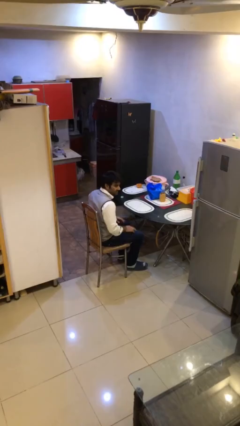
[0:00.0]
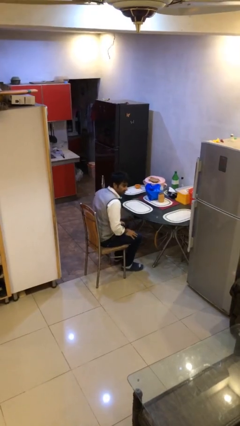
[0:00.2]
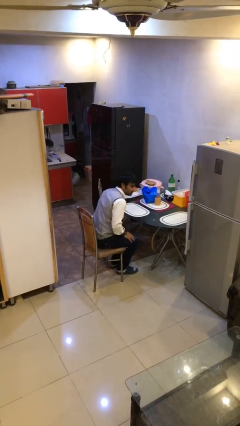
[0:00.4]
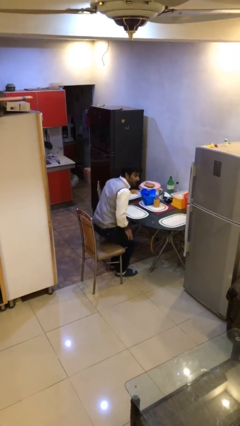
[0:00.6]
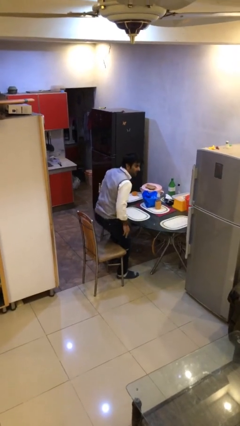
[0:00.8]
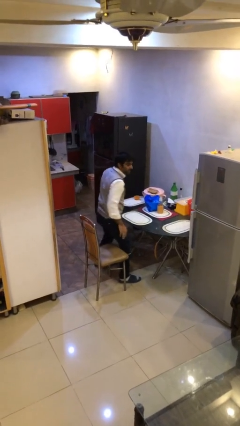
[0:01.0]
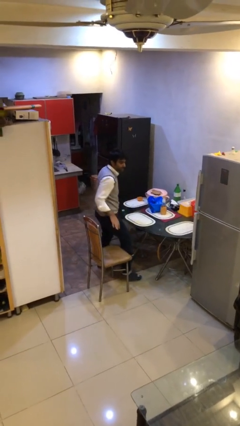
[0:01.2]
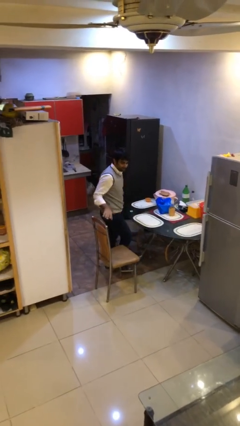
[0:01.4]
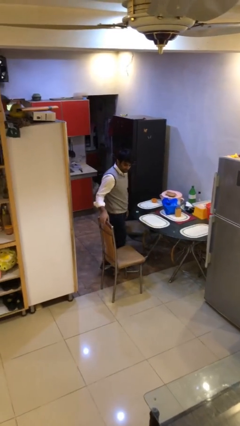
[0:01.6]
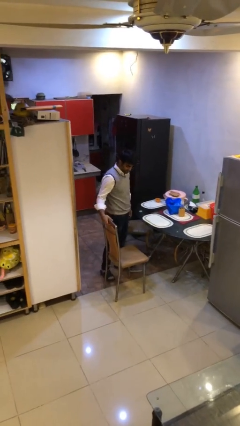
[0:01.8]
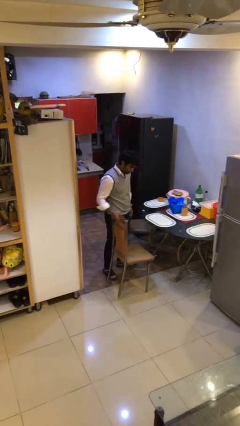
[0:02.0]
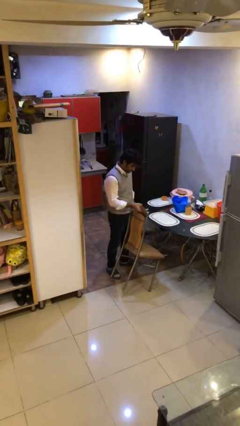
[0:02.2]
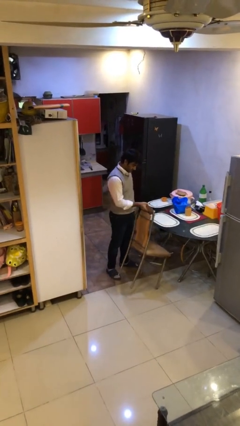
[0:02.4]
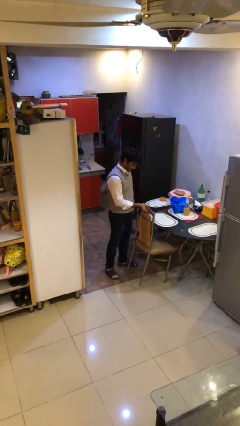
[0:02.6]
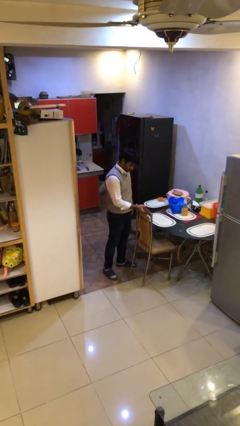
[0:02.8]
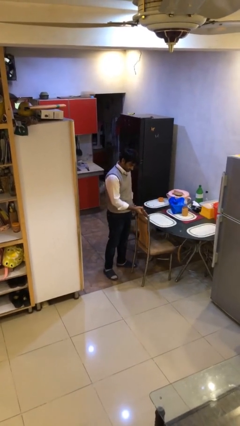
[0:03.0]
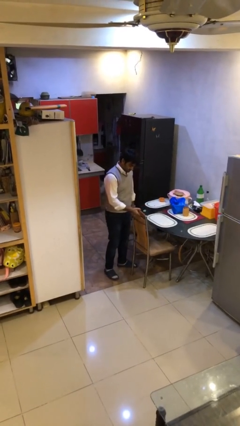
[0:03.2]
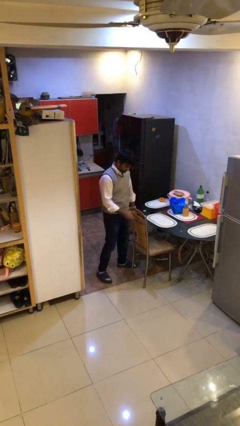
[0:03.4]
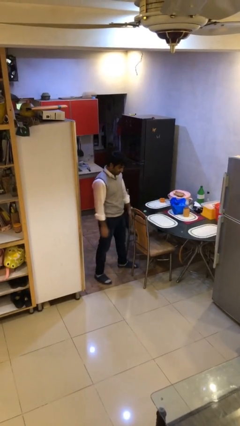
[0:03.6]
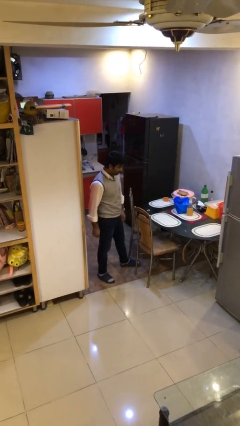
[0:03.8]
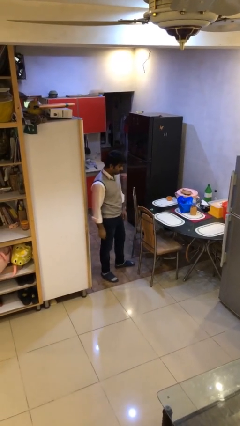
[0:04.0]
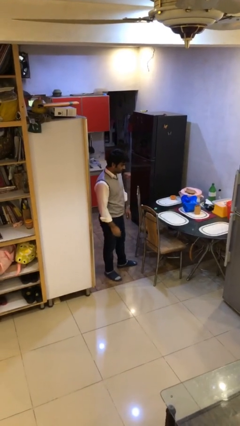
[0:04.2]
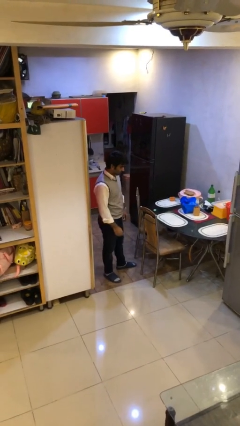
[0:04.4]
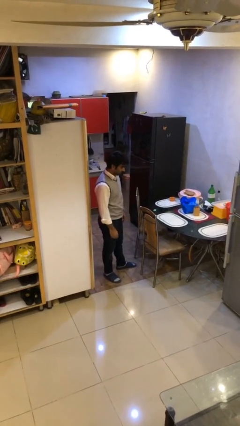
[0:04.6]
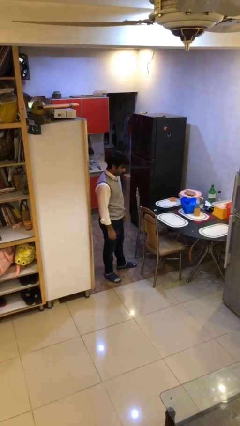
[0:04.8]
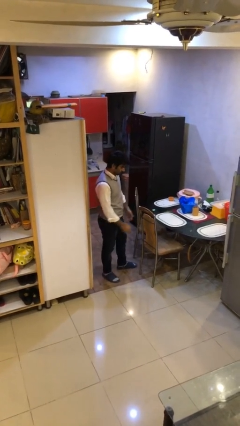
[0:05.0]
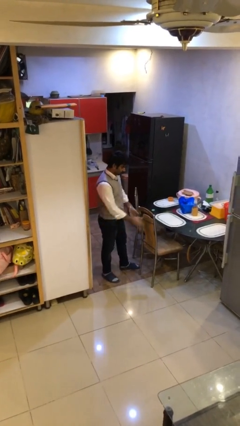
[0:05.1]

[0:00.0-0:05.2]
person stands up

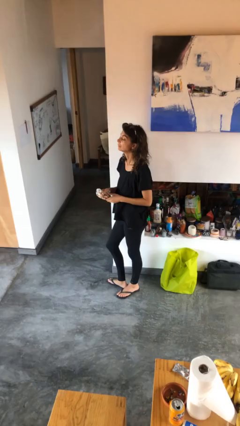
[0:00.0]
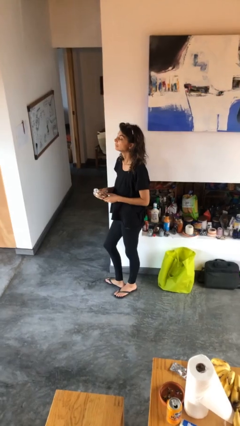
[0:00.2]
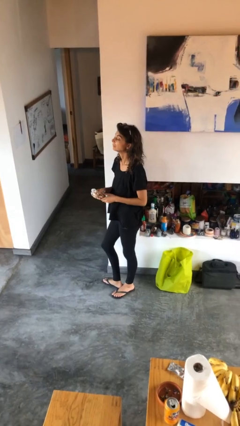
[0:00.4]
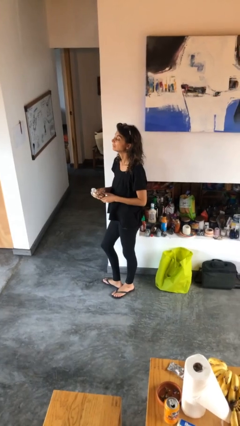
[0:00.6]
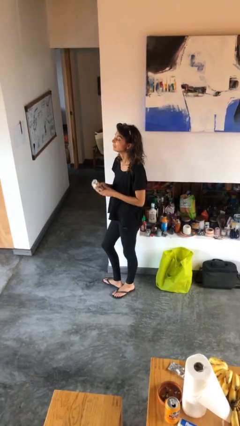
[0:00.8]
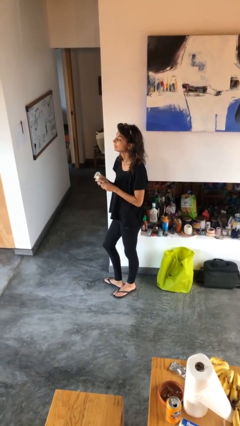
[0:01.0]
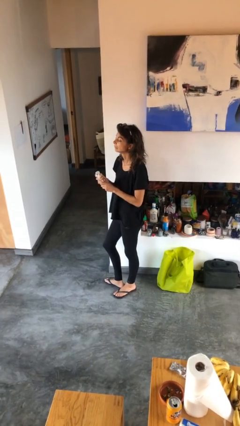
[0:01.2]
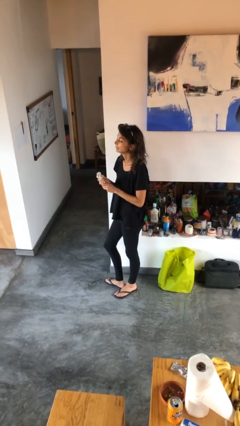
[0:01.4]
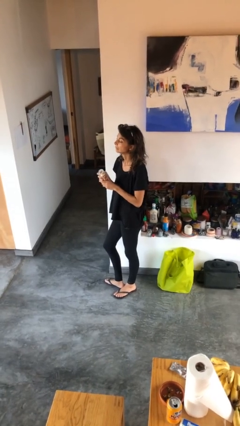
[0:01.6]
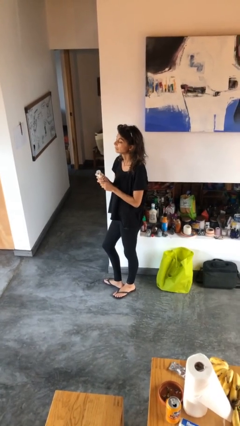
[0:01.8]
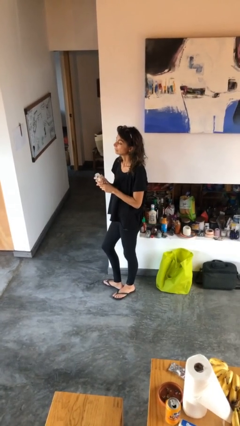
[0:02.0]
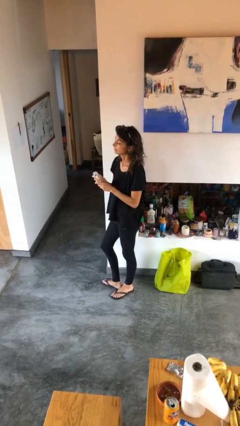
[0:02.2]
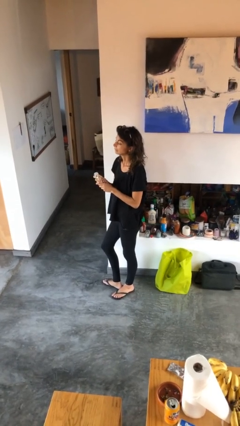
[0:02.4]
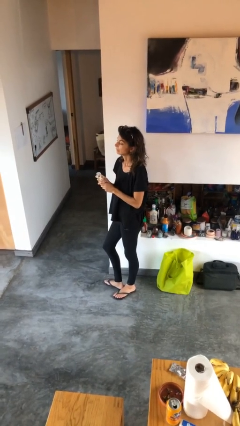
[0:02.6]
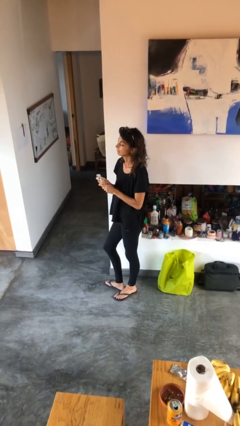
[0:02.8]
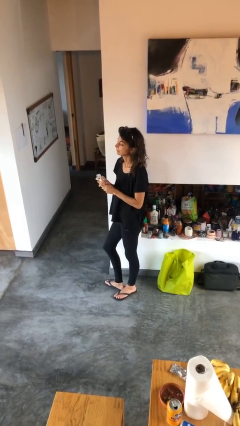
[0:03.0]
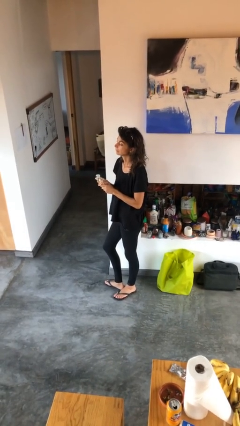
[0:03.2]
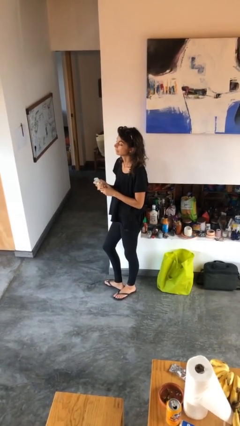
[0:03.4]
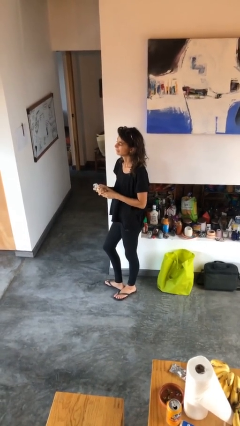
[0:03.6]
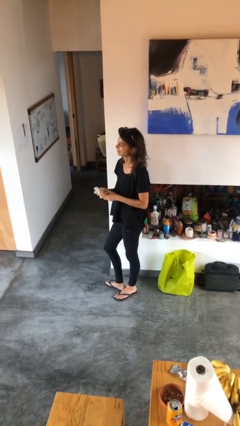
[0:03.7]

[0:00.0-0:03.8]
person squeezes object

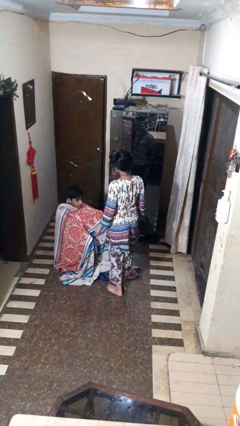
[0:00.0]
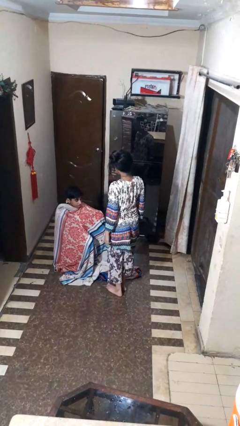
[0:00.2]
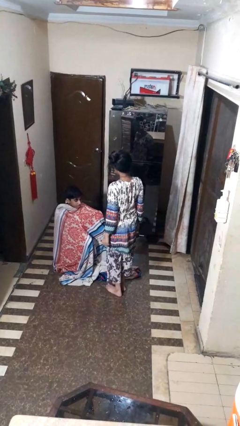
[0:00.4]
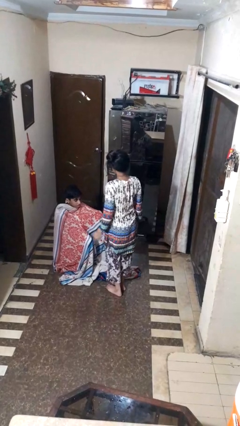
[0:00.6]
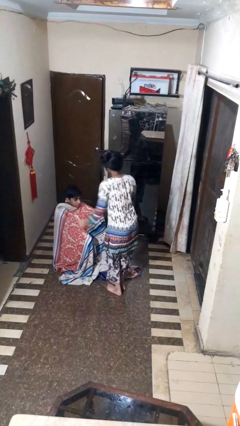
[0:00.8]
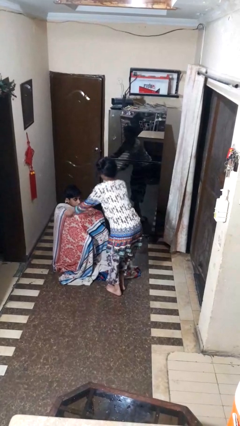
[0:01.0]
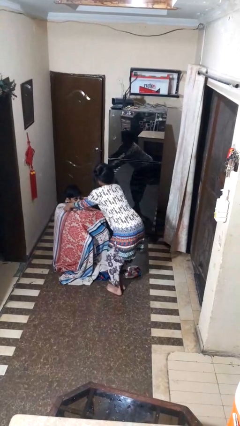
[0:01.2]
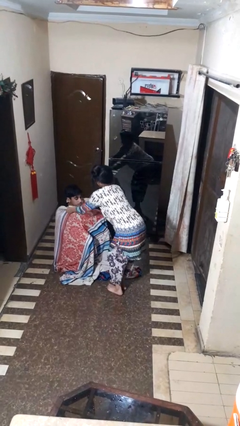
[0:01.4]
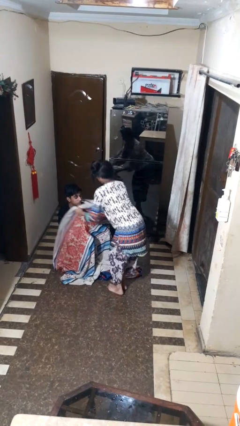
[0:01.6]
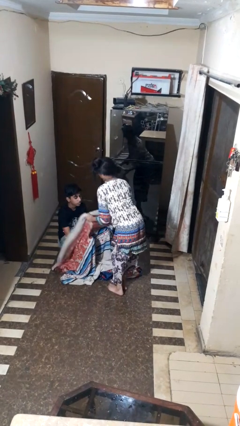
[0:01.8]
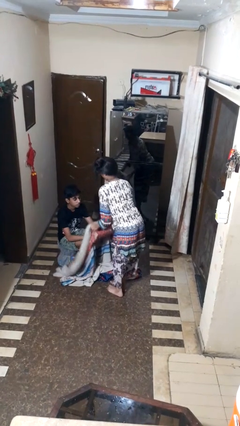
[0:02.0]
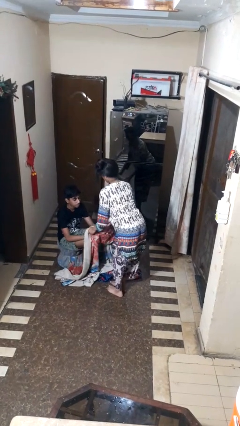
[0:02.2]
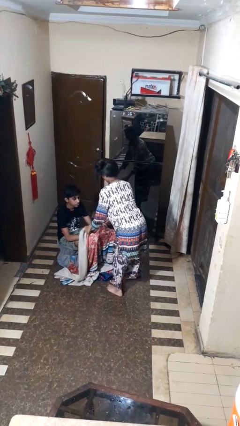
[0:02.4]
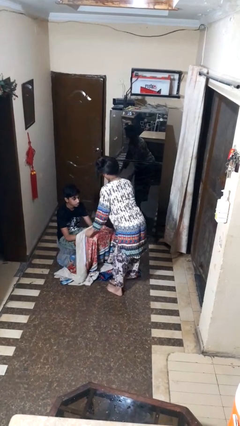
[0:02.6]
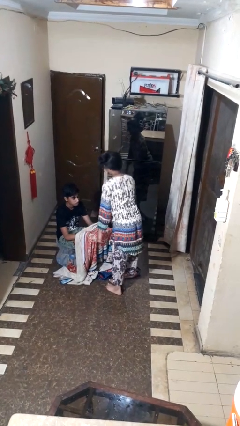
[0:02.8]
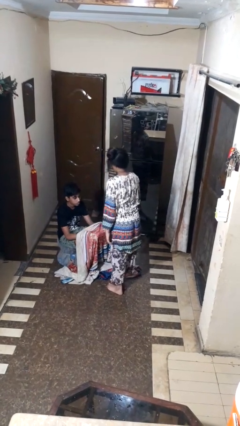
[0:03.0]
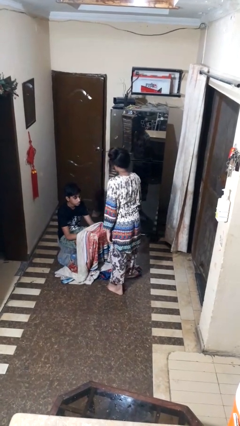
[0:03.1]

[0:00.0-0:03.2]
person uncovers friend with blanket

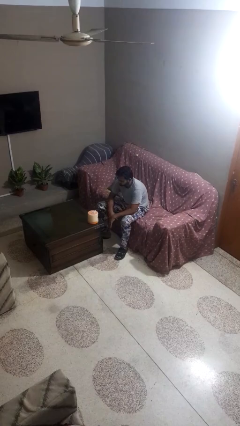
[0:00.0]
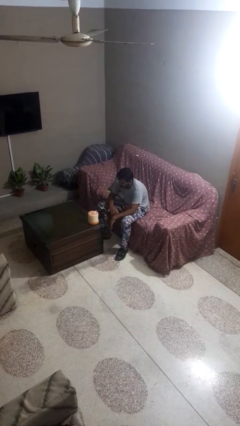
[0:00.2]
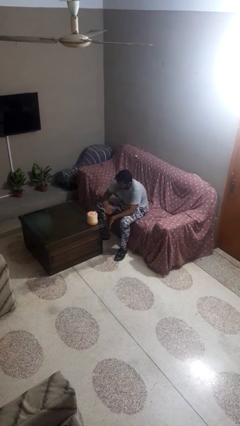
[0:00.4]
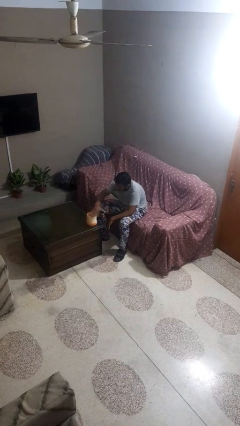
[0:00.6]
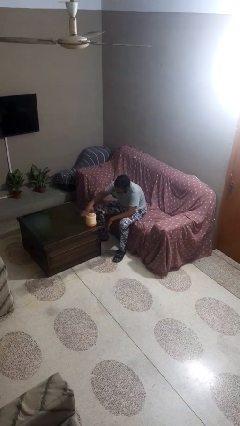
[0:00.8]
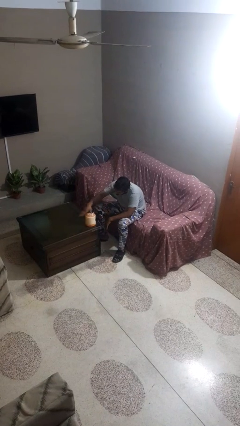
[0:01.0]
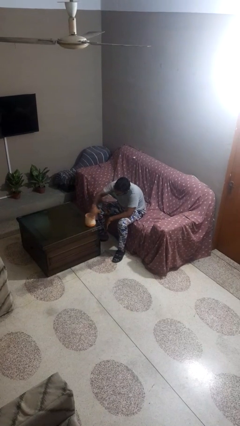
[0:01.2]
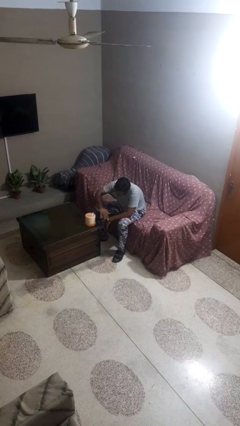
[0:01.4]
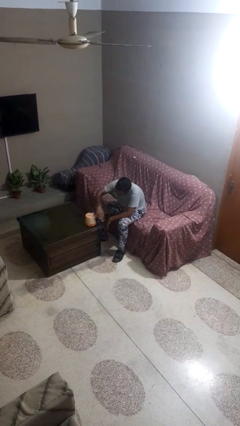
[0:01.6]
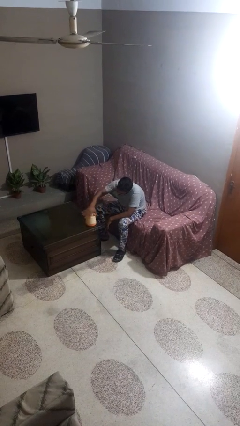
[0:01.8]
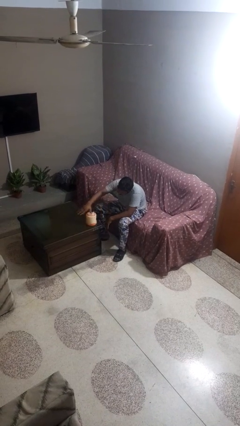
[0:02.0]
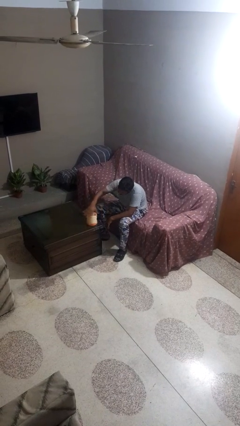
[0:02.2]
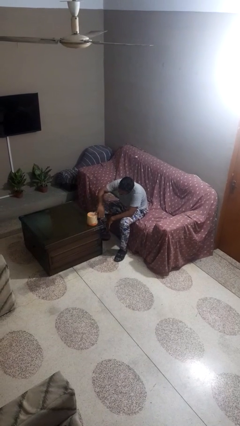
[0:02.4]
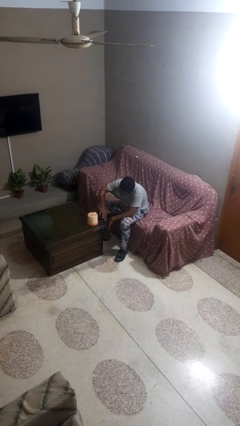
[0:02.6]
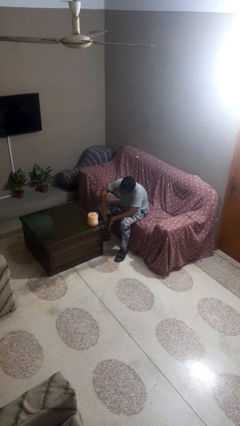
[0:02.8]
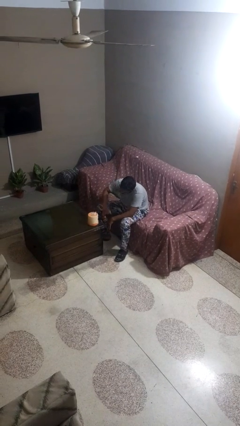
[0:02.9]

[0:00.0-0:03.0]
person waves hand over object

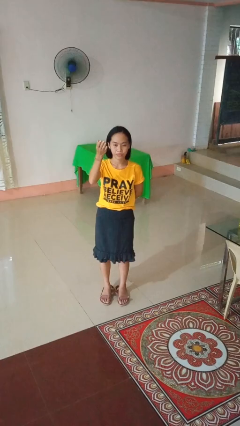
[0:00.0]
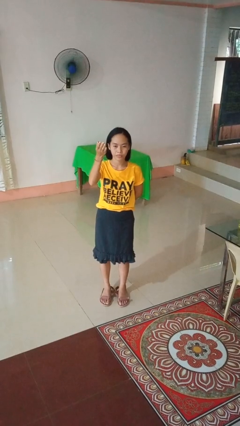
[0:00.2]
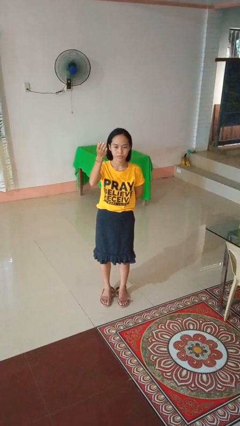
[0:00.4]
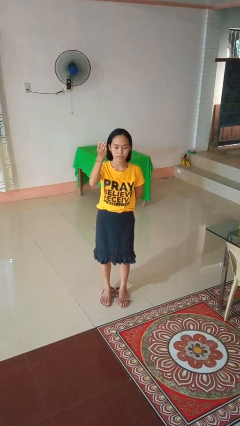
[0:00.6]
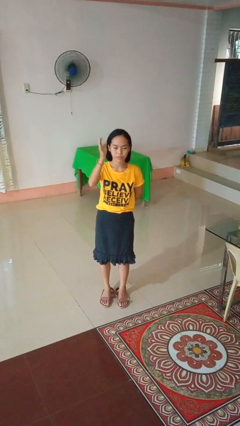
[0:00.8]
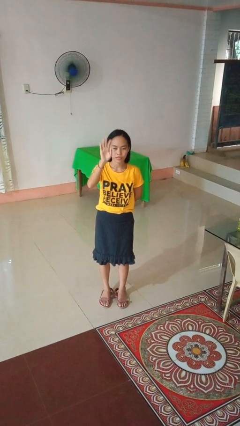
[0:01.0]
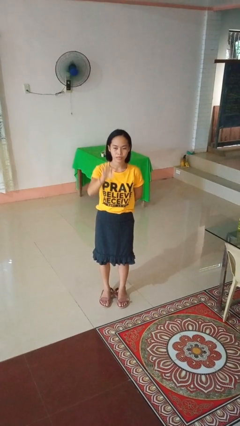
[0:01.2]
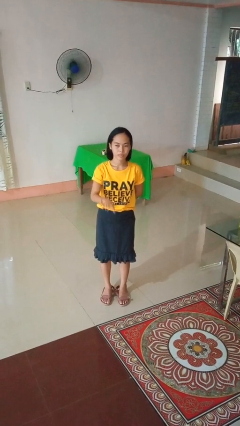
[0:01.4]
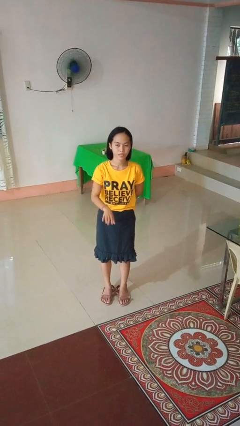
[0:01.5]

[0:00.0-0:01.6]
person gestures swipe up

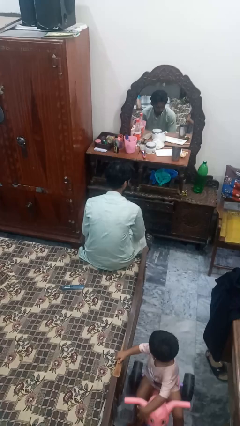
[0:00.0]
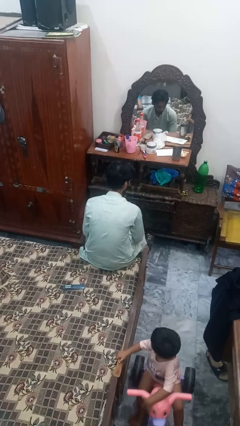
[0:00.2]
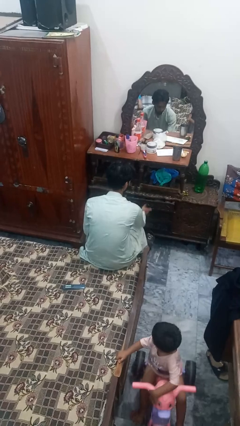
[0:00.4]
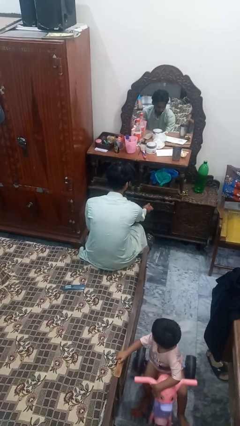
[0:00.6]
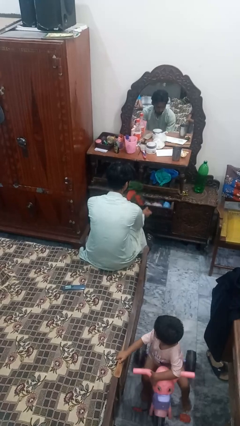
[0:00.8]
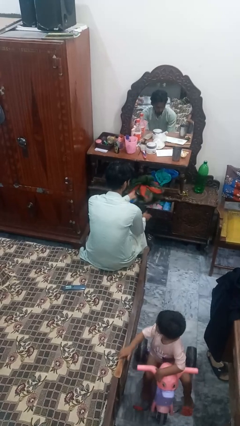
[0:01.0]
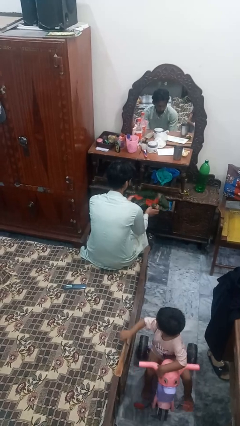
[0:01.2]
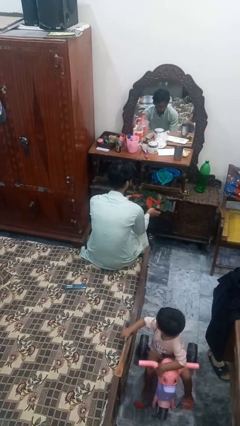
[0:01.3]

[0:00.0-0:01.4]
person puts clothes into dresser
